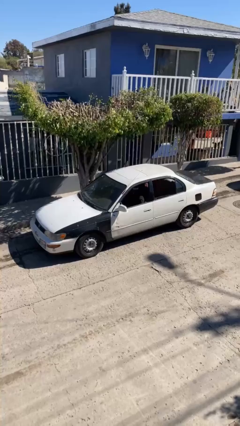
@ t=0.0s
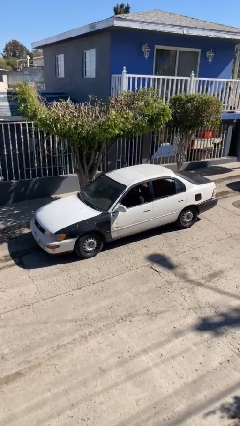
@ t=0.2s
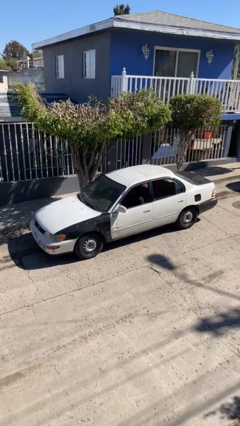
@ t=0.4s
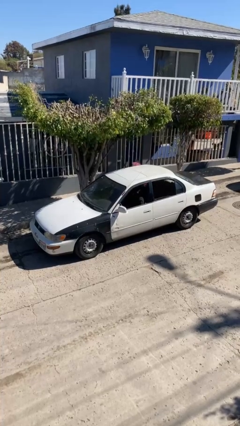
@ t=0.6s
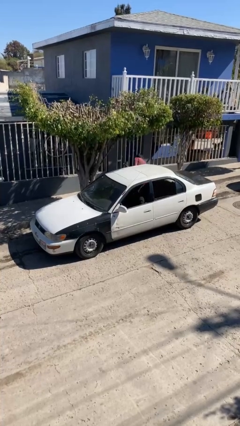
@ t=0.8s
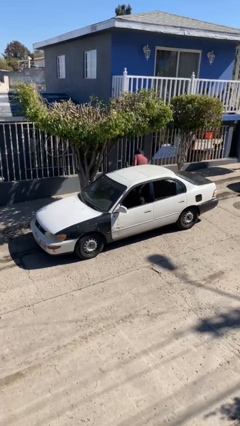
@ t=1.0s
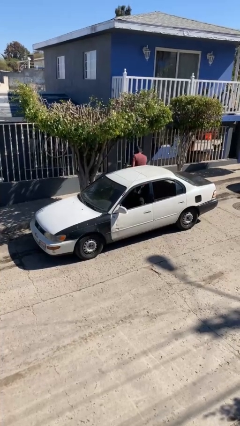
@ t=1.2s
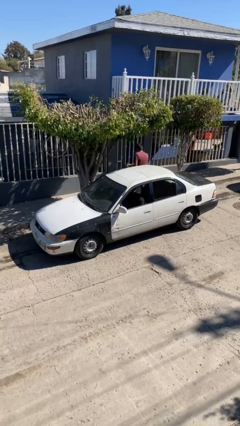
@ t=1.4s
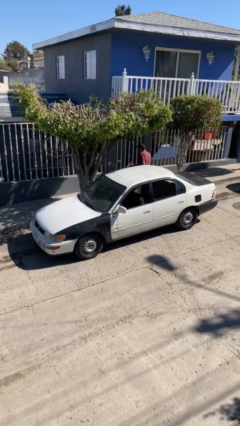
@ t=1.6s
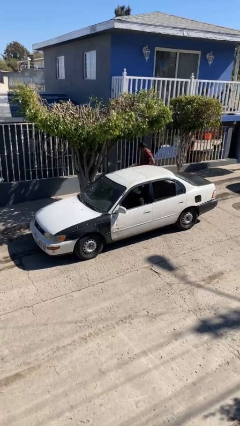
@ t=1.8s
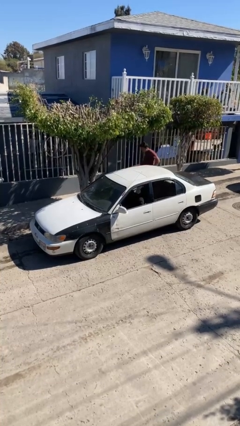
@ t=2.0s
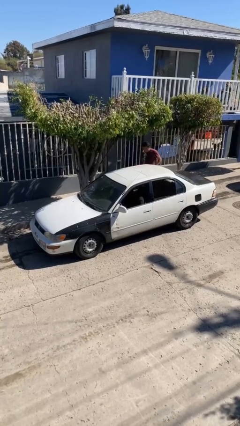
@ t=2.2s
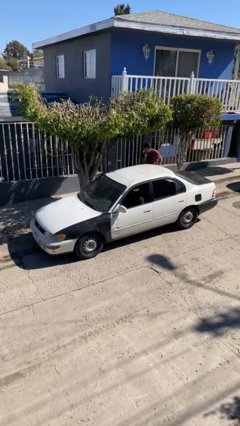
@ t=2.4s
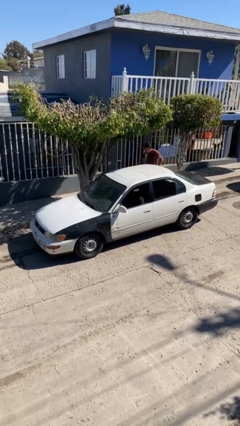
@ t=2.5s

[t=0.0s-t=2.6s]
car drops off person

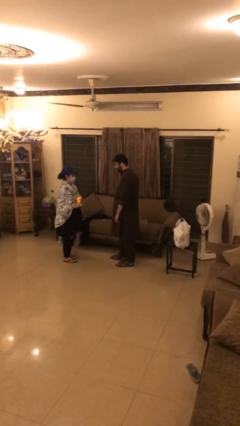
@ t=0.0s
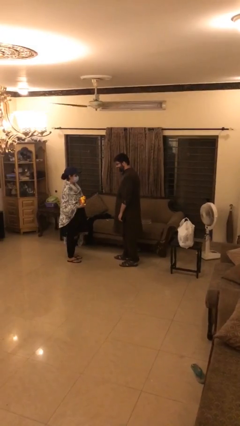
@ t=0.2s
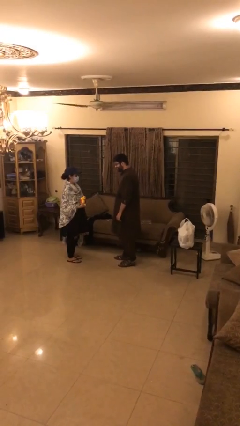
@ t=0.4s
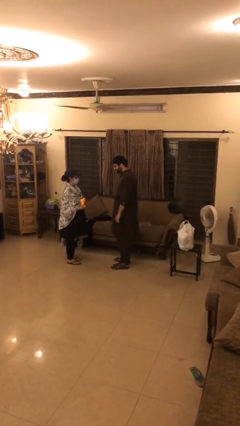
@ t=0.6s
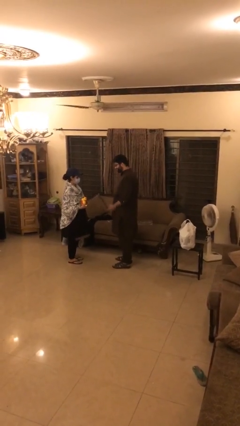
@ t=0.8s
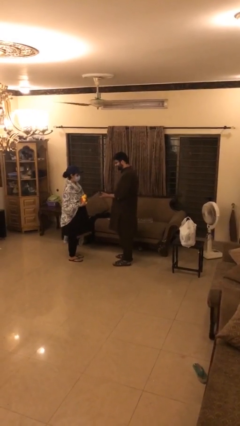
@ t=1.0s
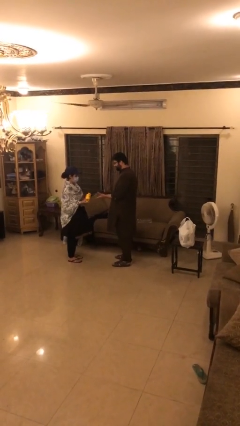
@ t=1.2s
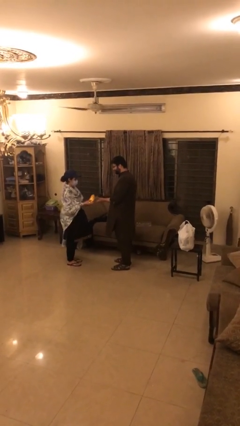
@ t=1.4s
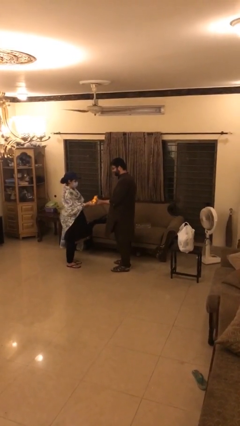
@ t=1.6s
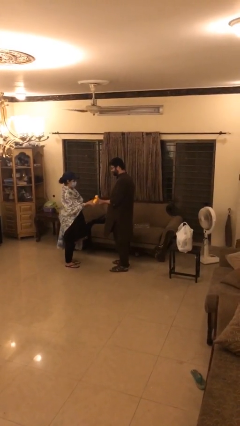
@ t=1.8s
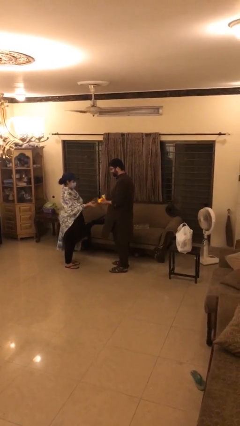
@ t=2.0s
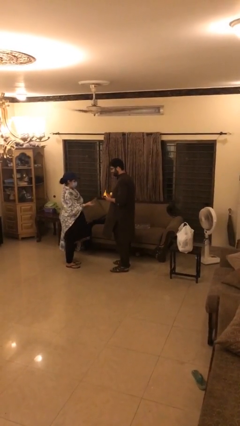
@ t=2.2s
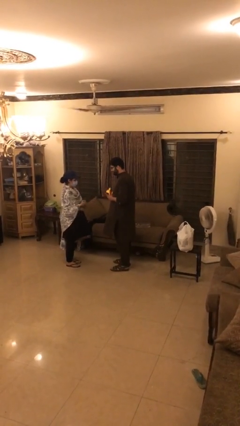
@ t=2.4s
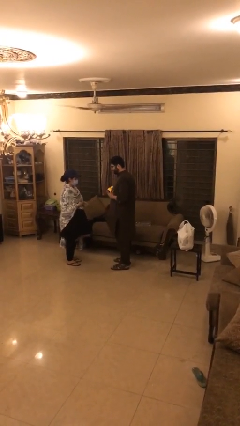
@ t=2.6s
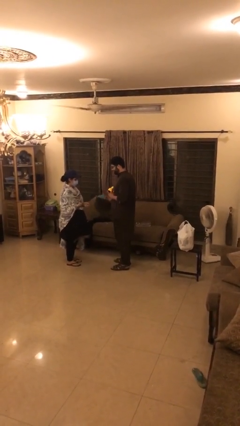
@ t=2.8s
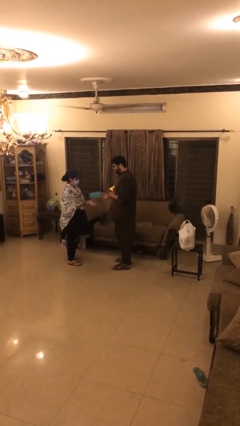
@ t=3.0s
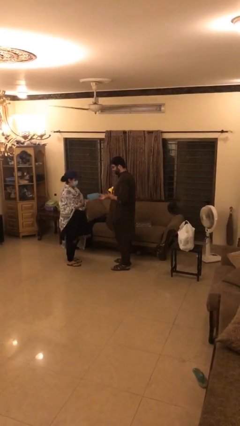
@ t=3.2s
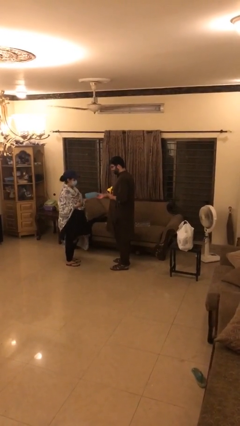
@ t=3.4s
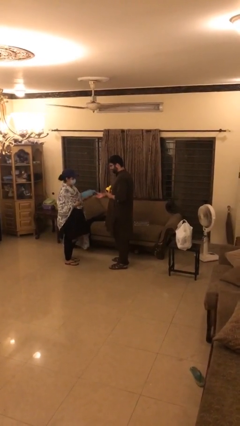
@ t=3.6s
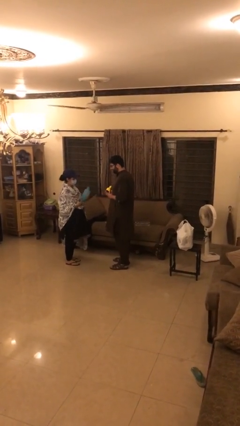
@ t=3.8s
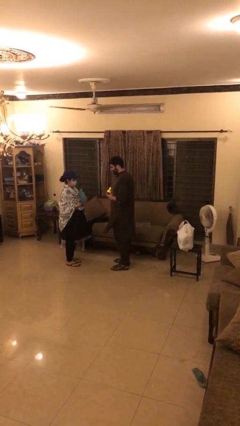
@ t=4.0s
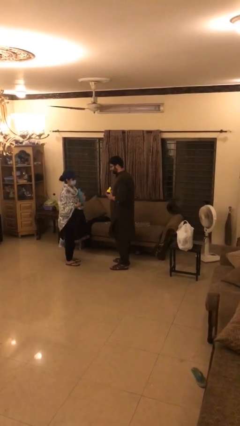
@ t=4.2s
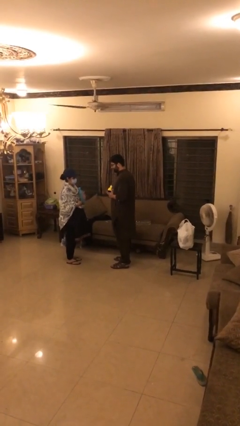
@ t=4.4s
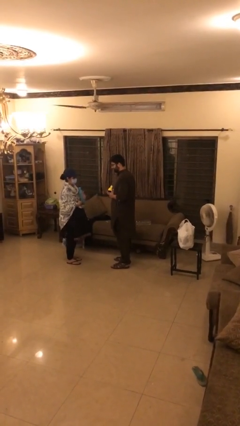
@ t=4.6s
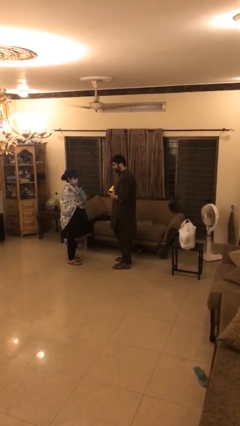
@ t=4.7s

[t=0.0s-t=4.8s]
person transfers object to person

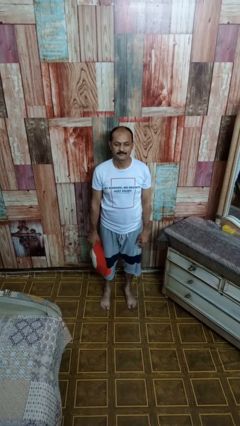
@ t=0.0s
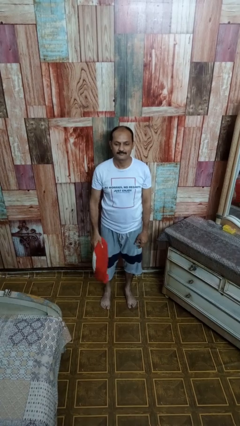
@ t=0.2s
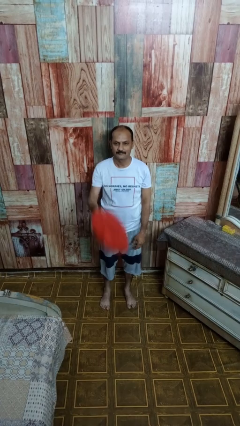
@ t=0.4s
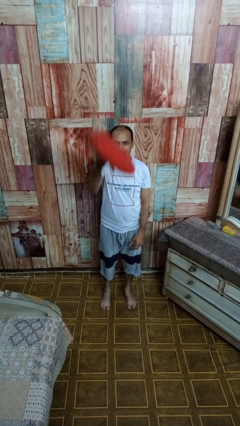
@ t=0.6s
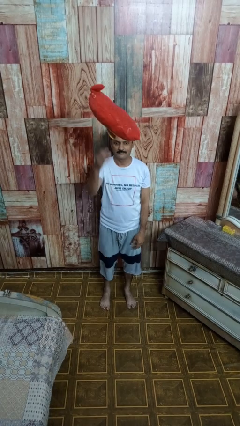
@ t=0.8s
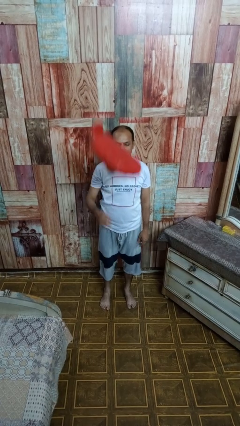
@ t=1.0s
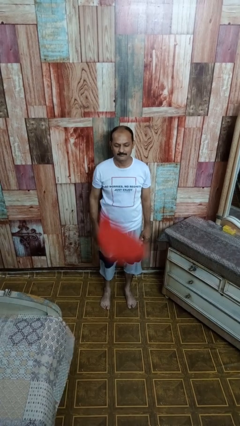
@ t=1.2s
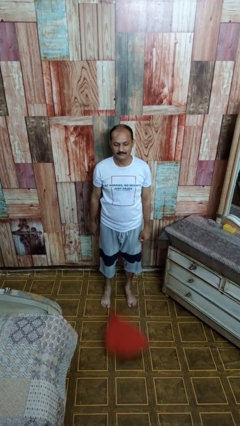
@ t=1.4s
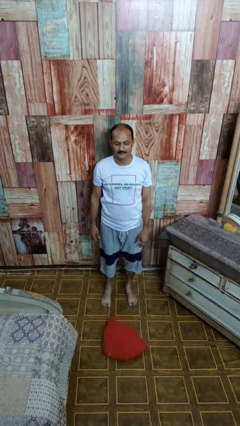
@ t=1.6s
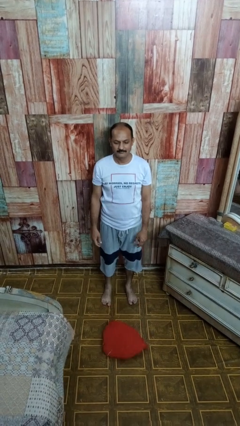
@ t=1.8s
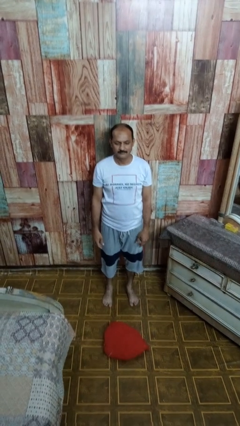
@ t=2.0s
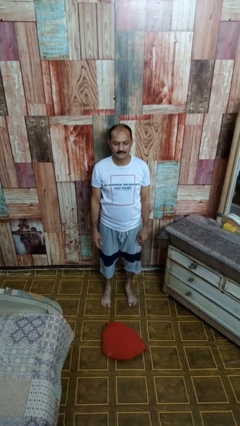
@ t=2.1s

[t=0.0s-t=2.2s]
person throws object into air

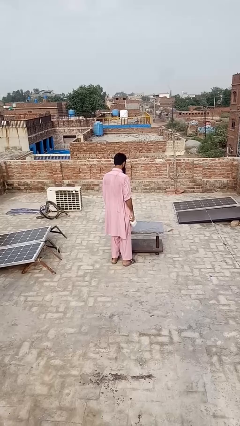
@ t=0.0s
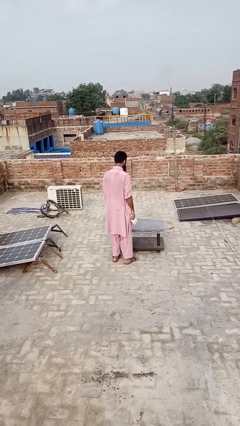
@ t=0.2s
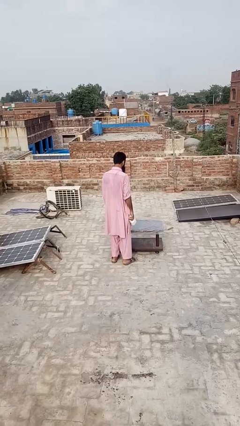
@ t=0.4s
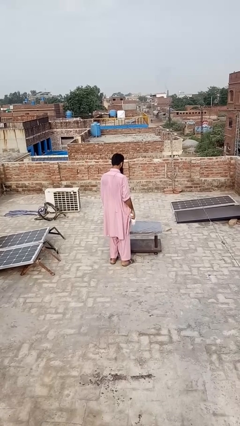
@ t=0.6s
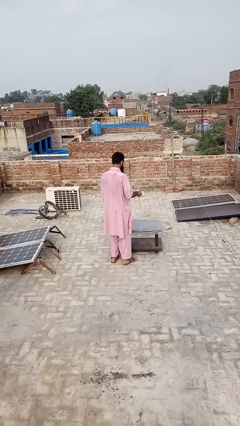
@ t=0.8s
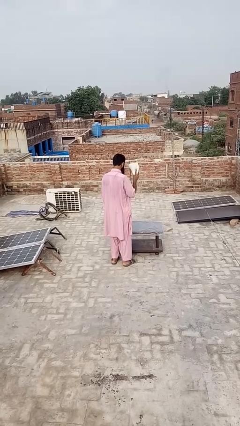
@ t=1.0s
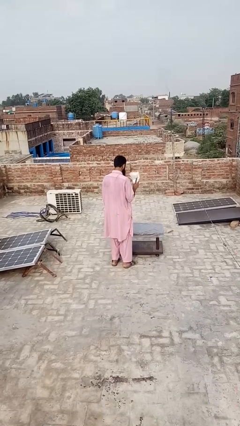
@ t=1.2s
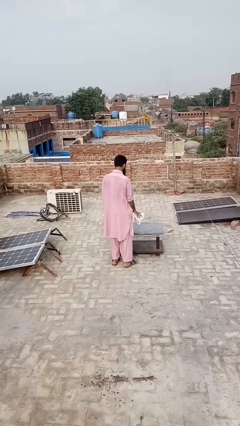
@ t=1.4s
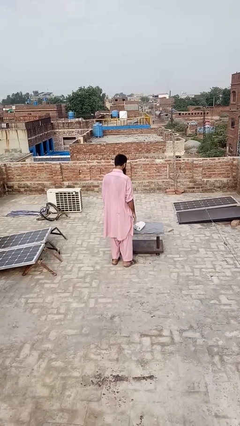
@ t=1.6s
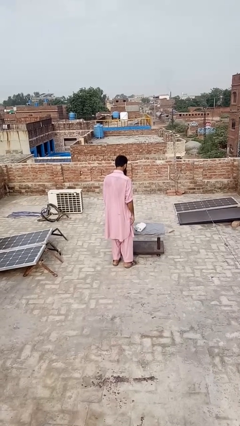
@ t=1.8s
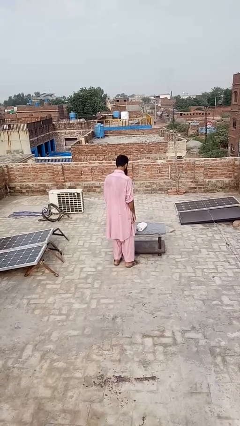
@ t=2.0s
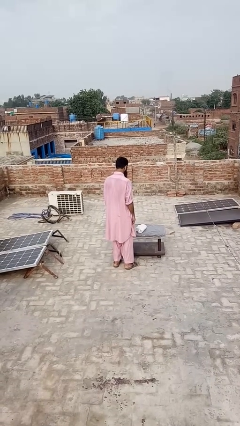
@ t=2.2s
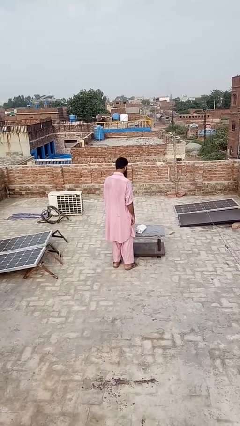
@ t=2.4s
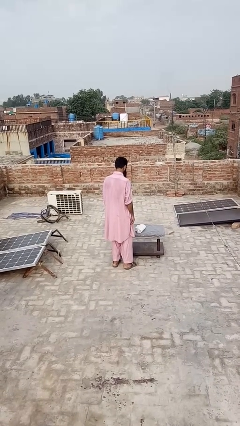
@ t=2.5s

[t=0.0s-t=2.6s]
person throws object on table

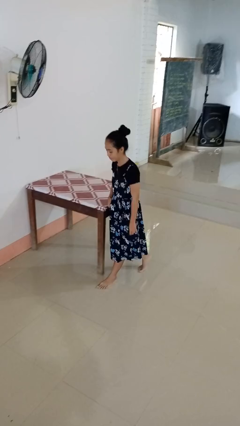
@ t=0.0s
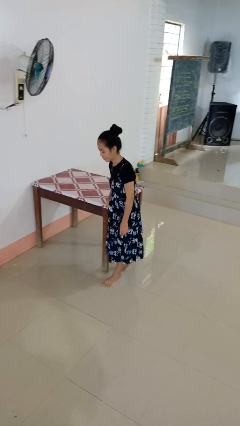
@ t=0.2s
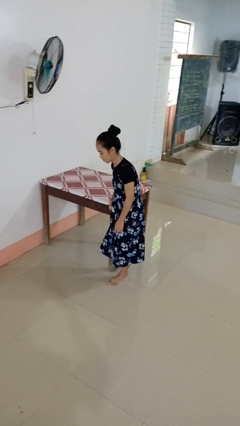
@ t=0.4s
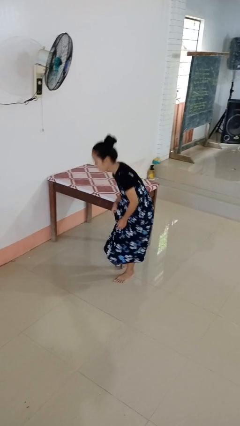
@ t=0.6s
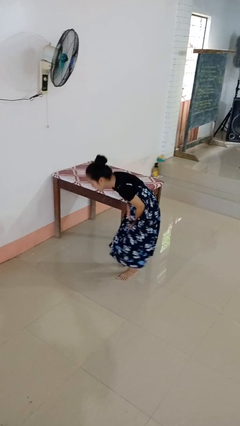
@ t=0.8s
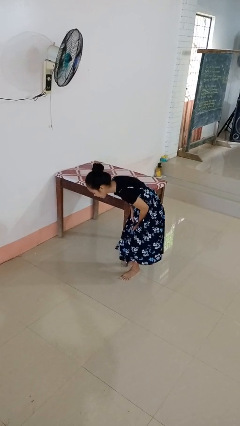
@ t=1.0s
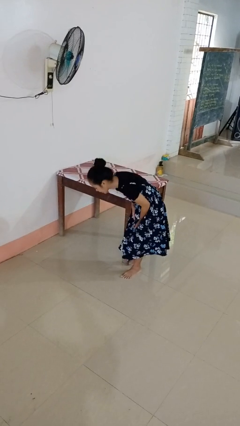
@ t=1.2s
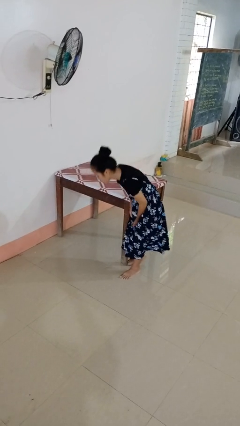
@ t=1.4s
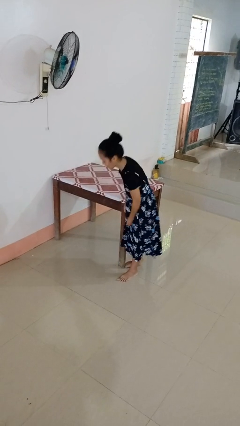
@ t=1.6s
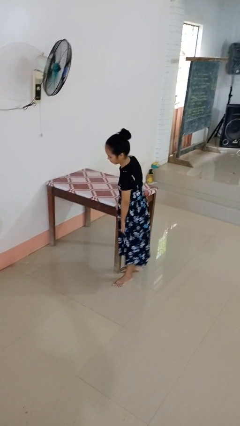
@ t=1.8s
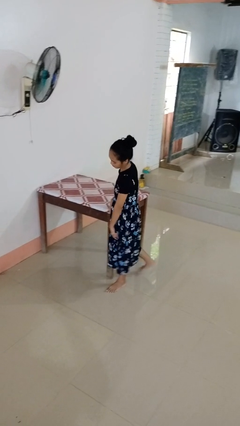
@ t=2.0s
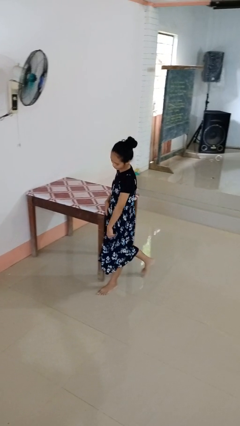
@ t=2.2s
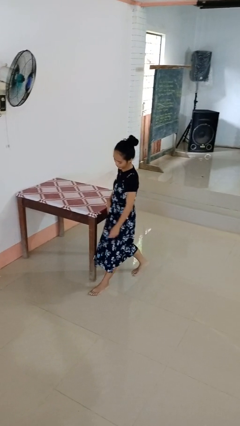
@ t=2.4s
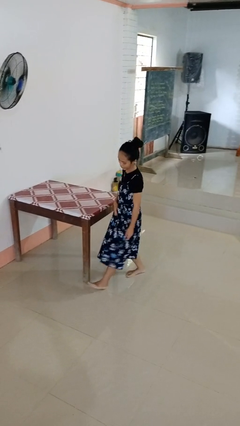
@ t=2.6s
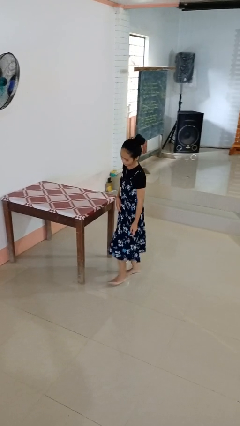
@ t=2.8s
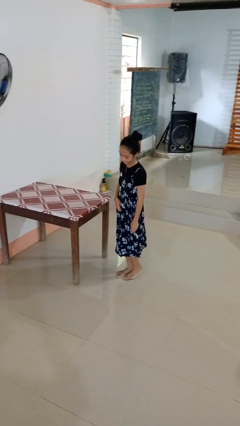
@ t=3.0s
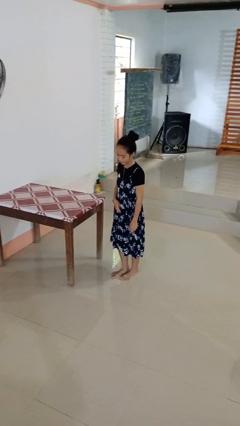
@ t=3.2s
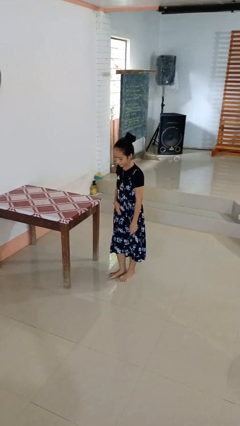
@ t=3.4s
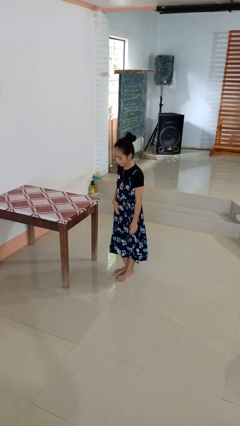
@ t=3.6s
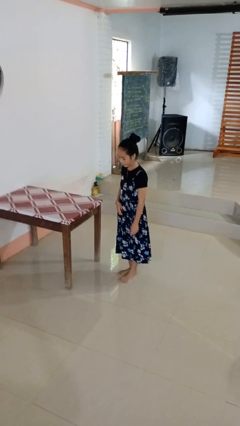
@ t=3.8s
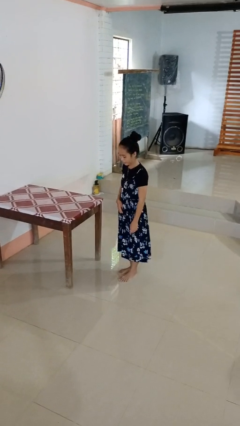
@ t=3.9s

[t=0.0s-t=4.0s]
person stubs toe

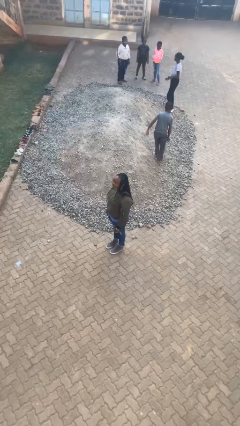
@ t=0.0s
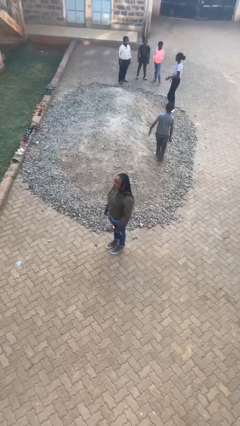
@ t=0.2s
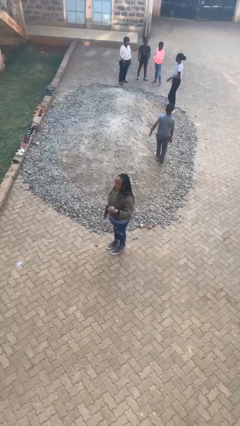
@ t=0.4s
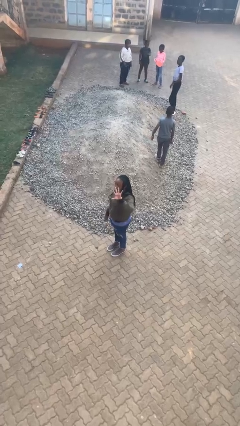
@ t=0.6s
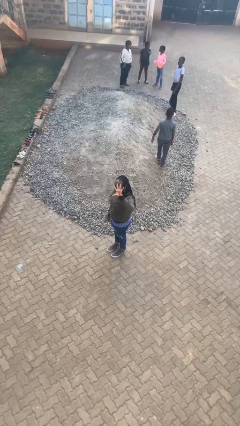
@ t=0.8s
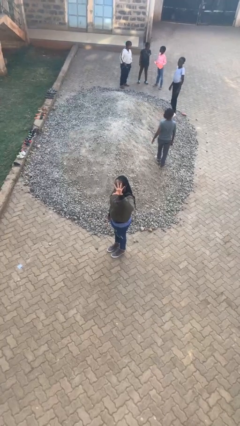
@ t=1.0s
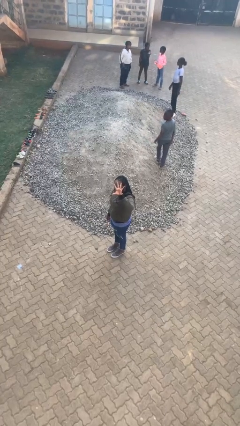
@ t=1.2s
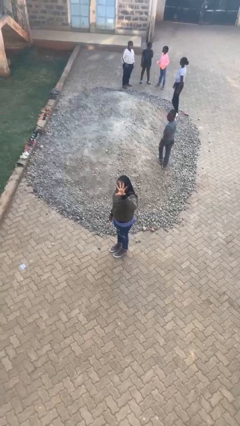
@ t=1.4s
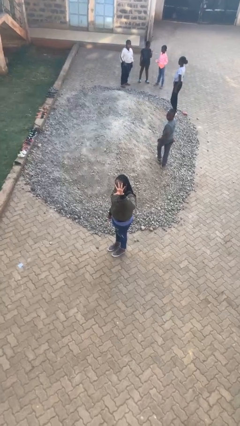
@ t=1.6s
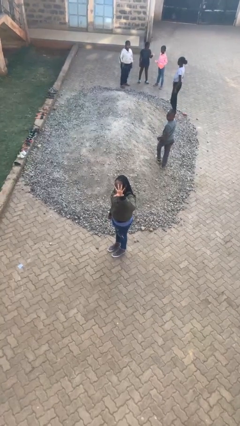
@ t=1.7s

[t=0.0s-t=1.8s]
person gestures number five
